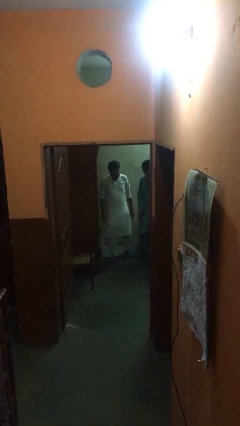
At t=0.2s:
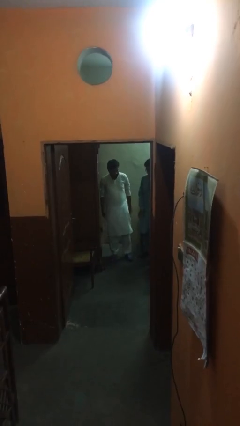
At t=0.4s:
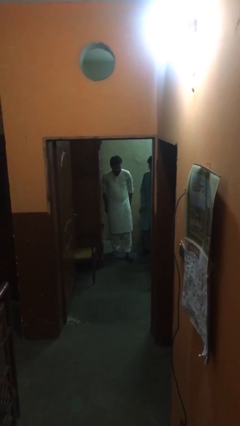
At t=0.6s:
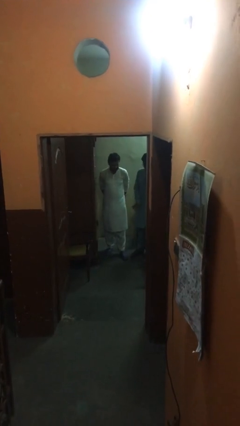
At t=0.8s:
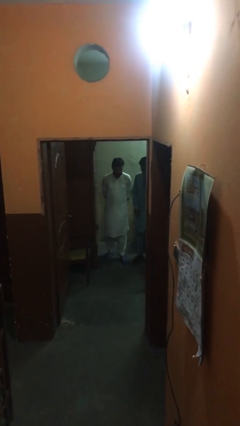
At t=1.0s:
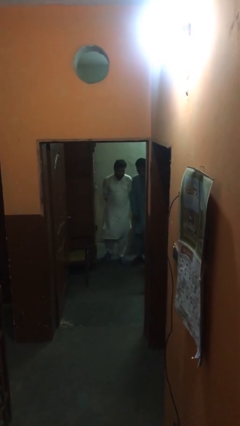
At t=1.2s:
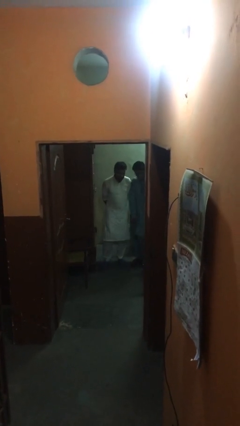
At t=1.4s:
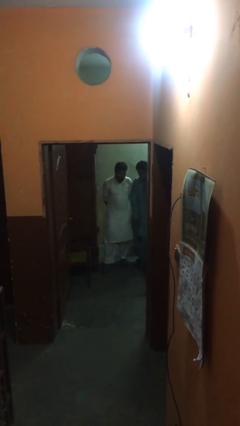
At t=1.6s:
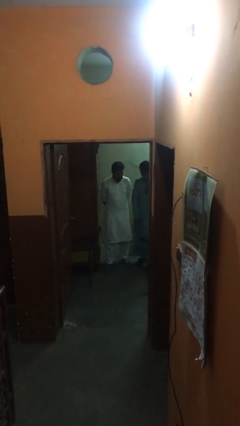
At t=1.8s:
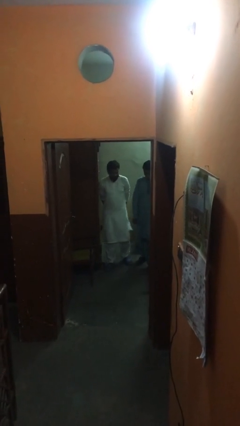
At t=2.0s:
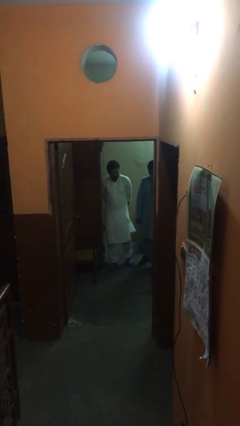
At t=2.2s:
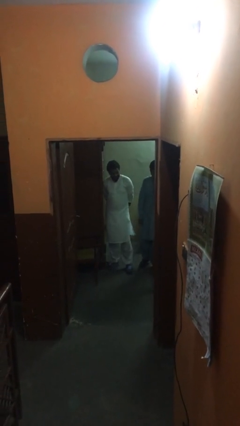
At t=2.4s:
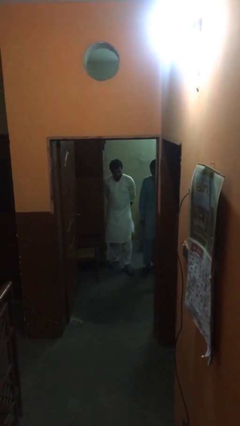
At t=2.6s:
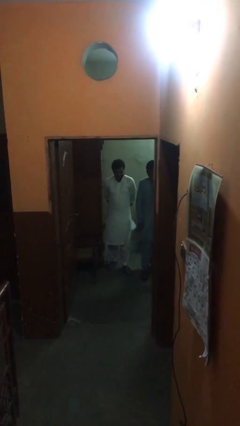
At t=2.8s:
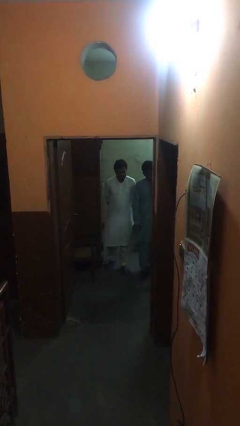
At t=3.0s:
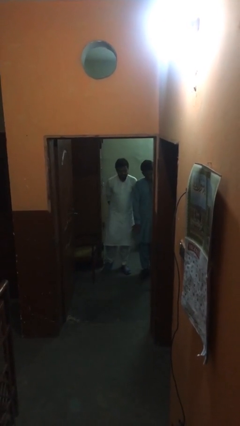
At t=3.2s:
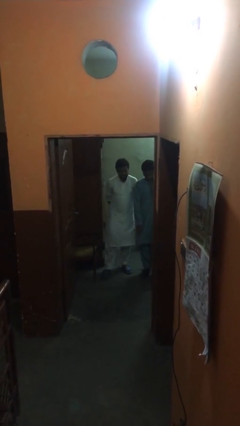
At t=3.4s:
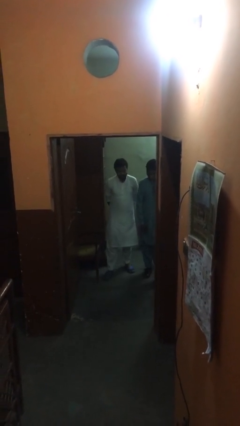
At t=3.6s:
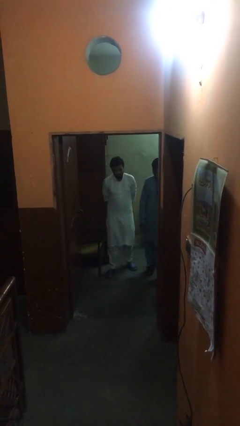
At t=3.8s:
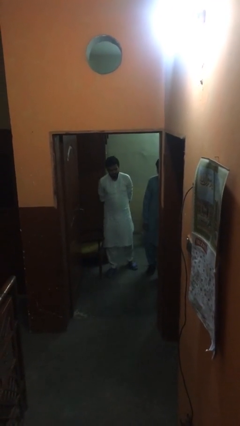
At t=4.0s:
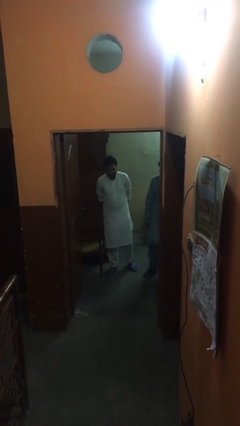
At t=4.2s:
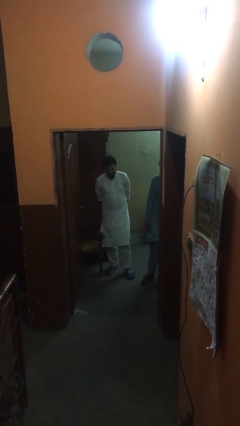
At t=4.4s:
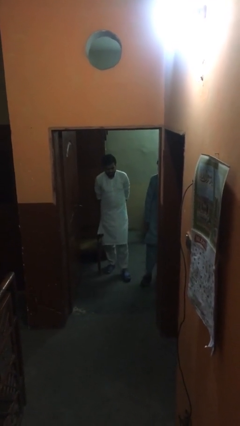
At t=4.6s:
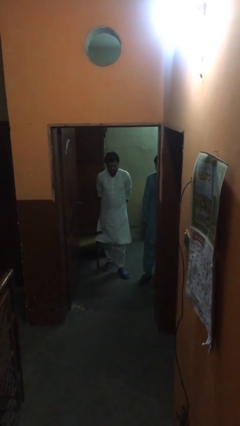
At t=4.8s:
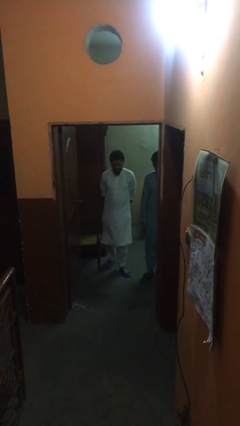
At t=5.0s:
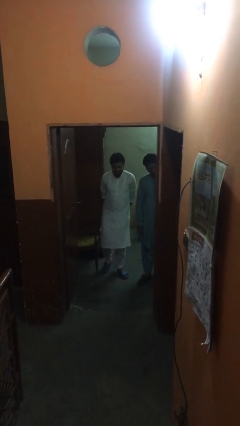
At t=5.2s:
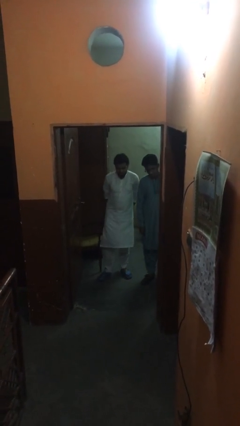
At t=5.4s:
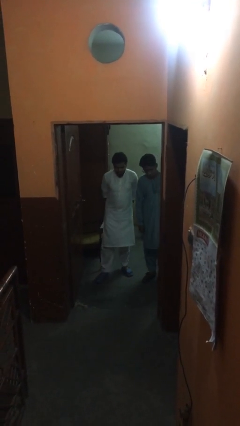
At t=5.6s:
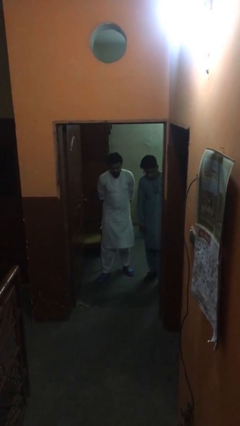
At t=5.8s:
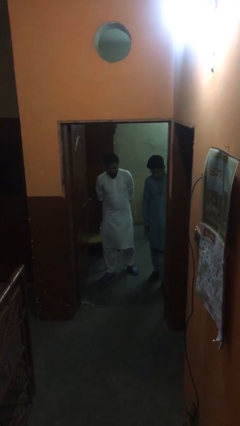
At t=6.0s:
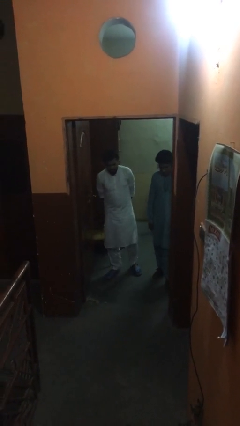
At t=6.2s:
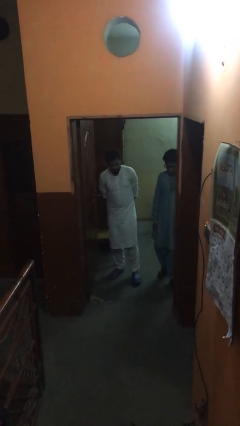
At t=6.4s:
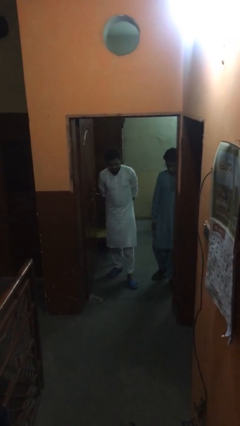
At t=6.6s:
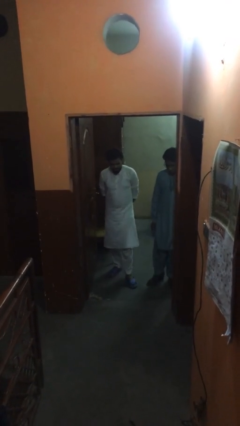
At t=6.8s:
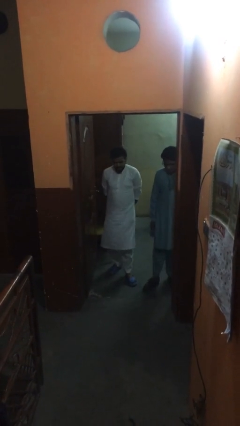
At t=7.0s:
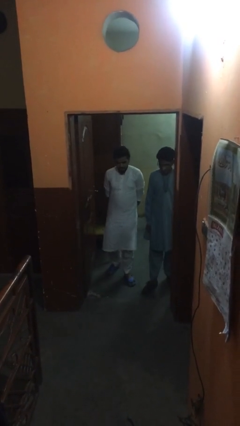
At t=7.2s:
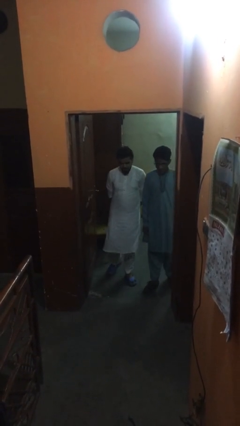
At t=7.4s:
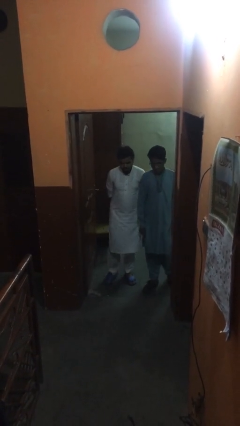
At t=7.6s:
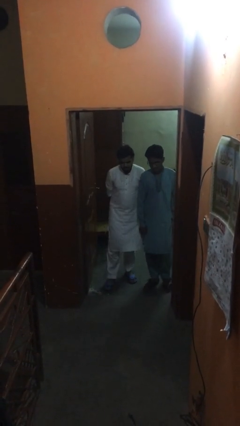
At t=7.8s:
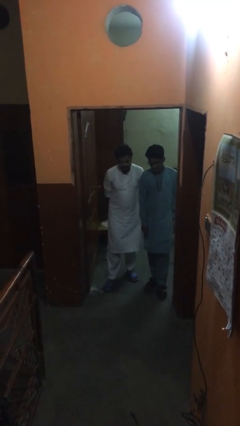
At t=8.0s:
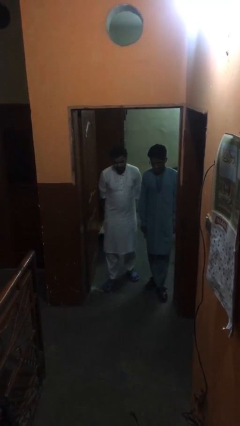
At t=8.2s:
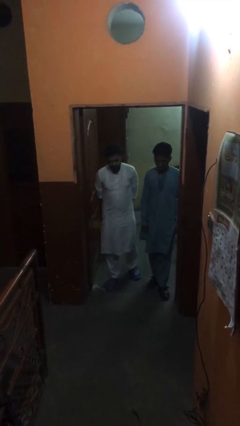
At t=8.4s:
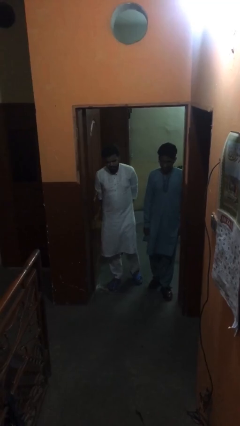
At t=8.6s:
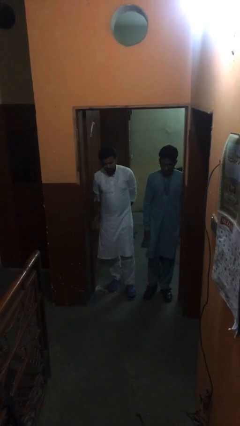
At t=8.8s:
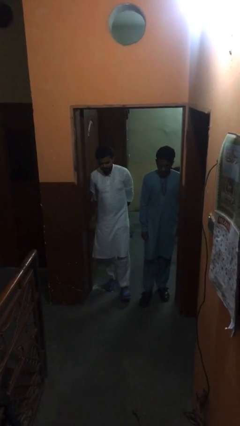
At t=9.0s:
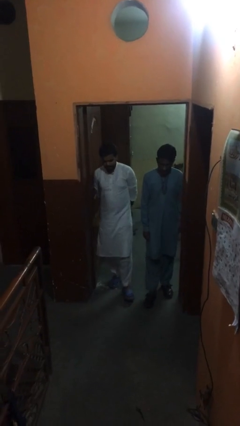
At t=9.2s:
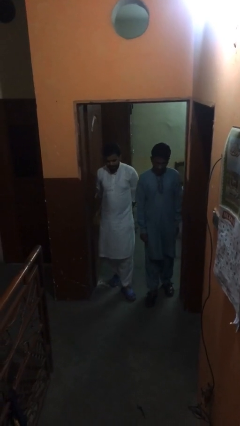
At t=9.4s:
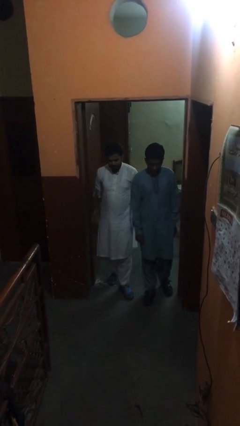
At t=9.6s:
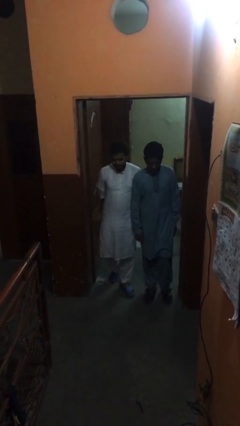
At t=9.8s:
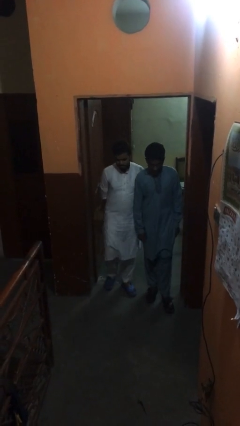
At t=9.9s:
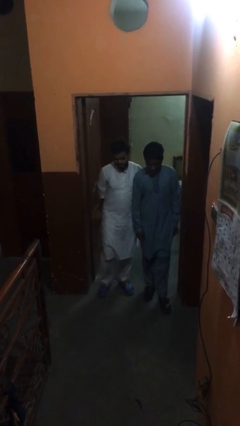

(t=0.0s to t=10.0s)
person talks to person

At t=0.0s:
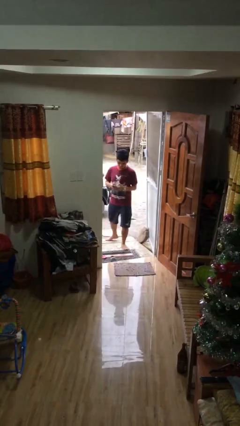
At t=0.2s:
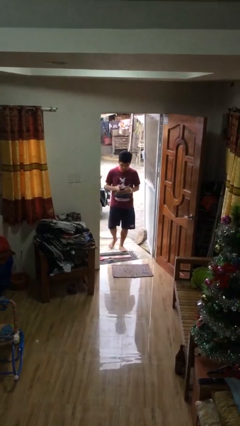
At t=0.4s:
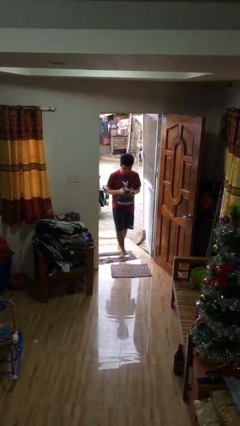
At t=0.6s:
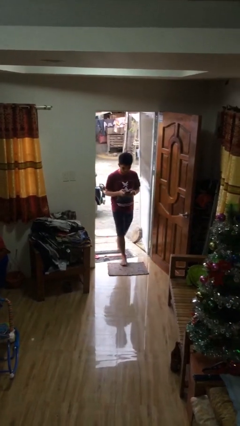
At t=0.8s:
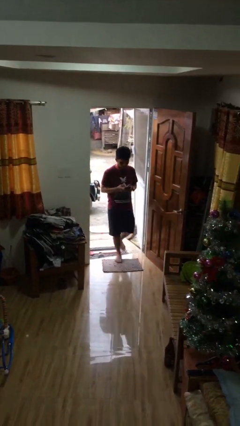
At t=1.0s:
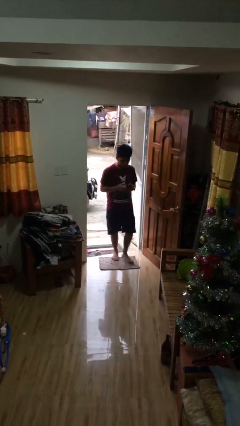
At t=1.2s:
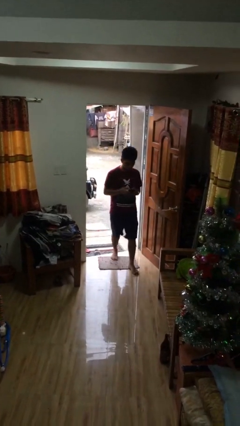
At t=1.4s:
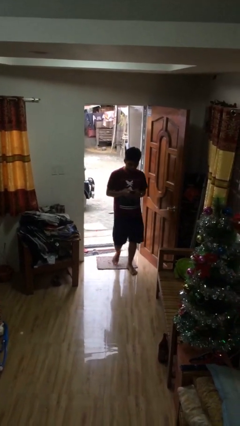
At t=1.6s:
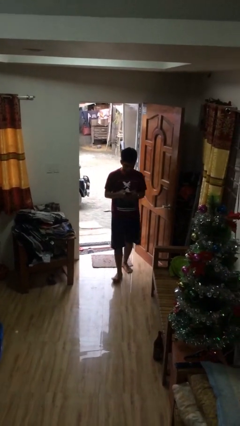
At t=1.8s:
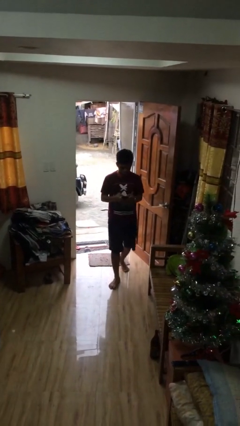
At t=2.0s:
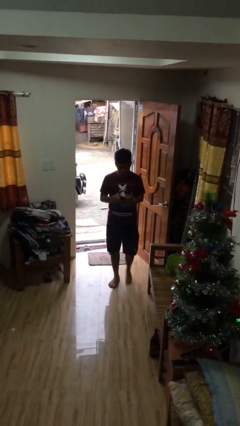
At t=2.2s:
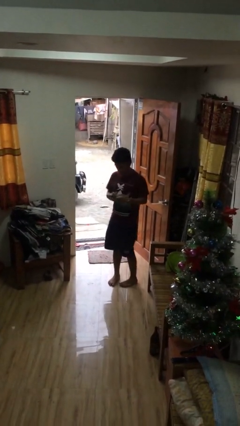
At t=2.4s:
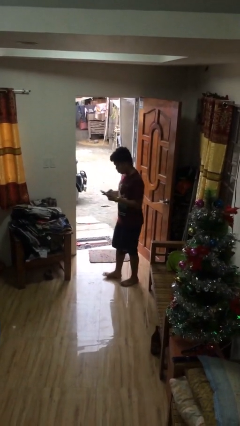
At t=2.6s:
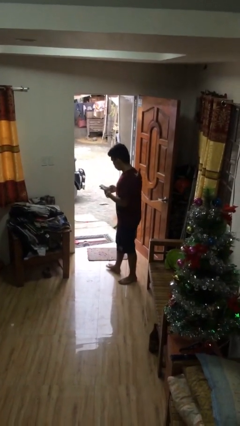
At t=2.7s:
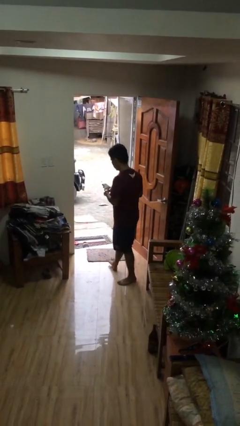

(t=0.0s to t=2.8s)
person enters scene through structure

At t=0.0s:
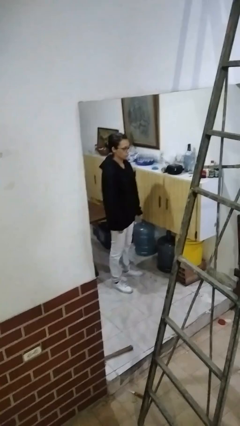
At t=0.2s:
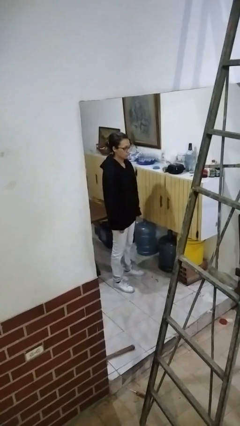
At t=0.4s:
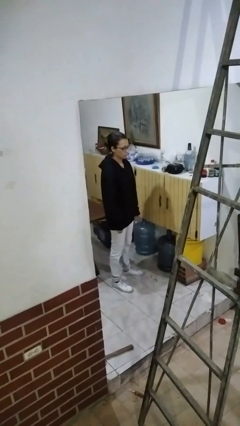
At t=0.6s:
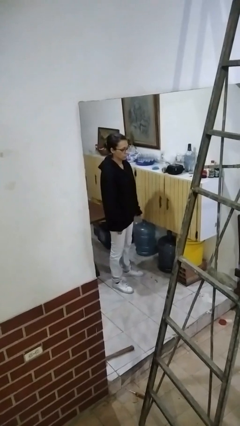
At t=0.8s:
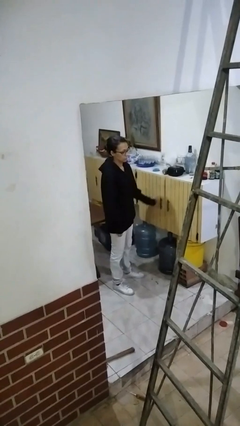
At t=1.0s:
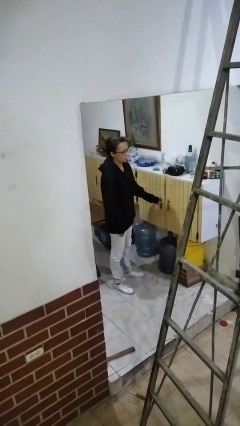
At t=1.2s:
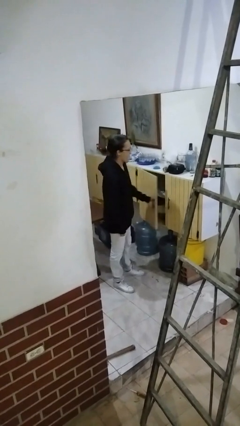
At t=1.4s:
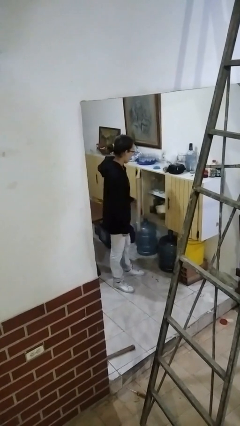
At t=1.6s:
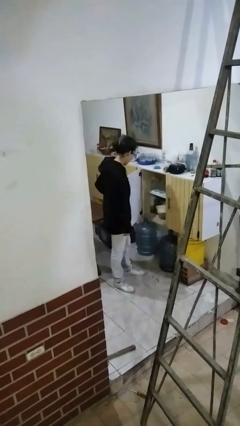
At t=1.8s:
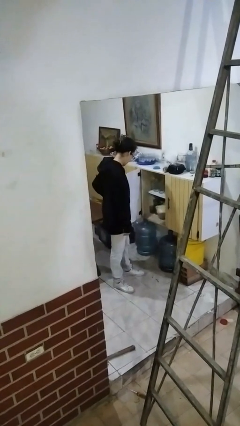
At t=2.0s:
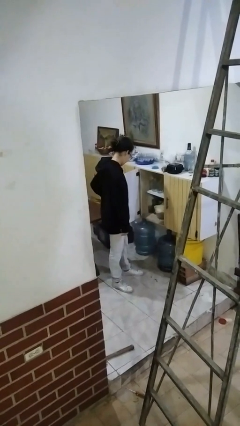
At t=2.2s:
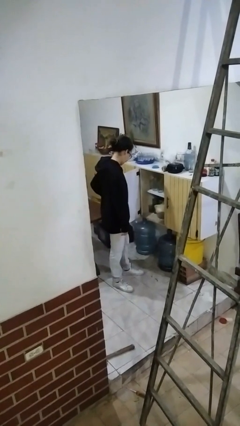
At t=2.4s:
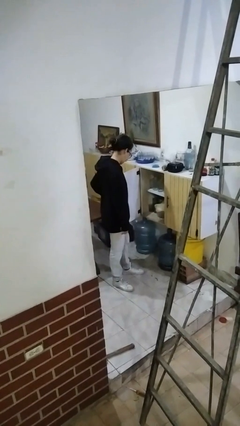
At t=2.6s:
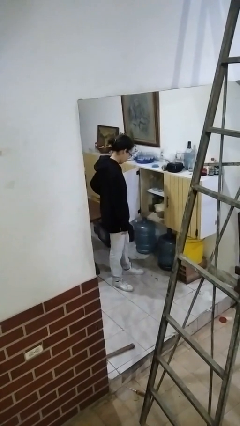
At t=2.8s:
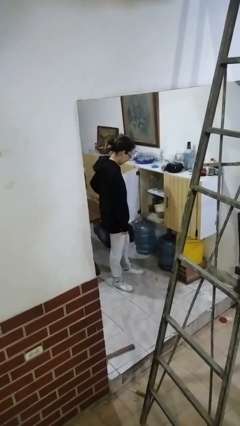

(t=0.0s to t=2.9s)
person opens cabinet

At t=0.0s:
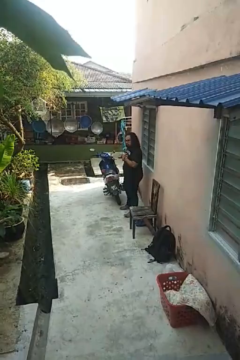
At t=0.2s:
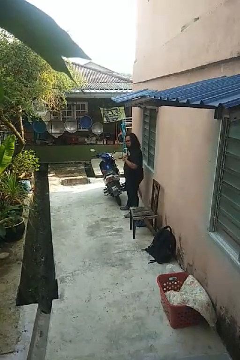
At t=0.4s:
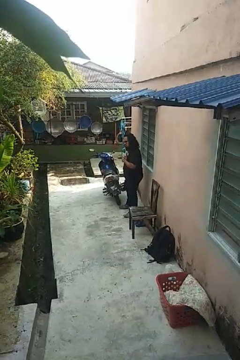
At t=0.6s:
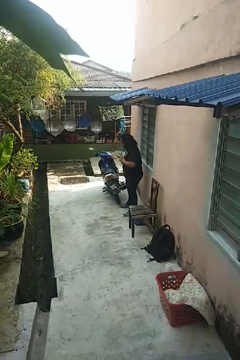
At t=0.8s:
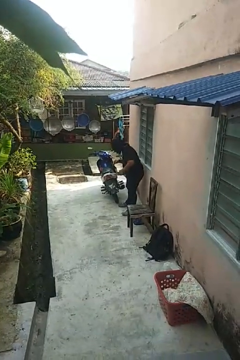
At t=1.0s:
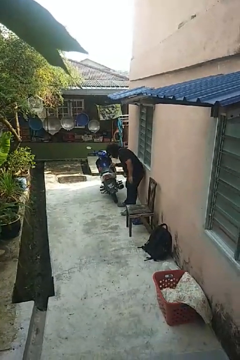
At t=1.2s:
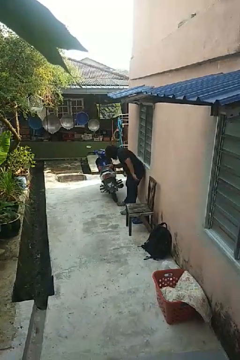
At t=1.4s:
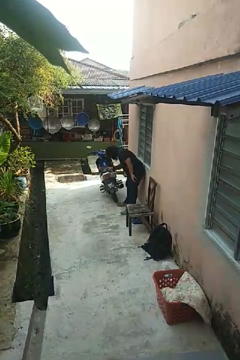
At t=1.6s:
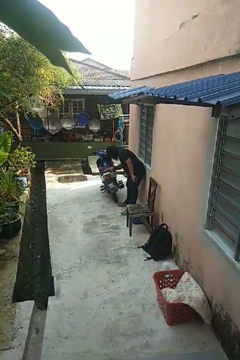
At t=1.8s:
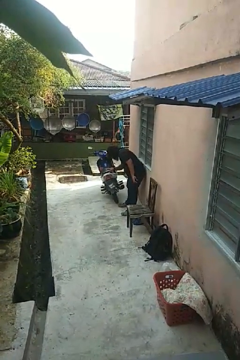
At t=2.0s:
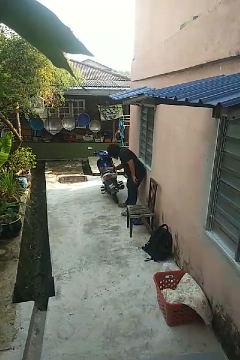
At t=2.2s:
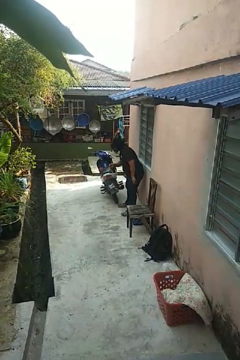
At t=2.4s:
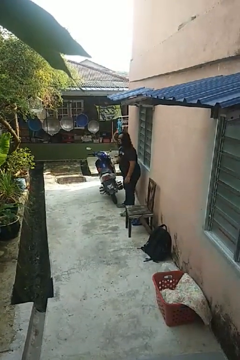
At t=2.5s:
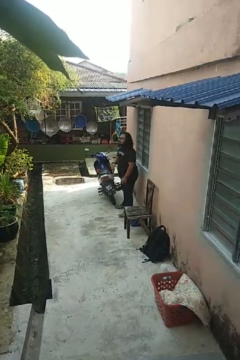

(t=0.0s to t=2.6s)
person taps object with finger
